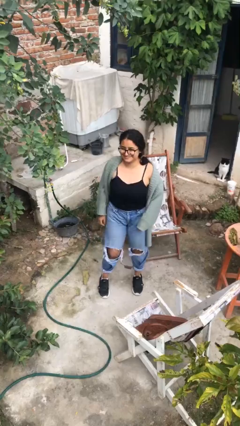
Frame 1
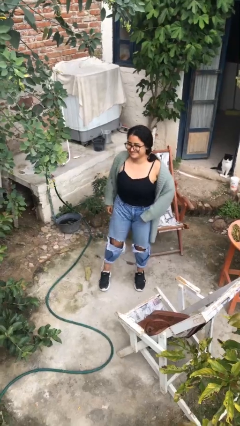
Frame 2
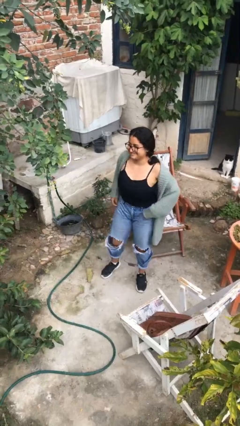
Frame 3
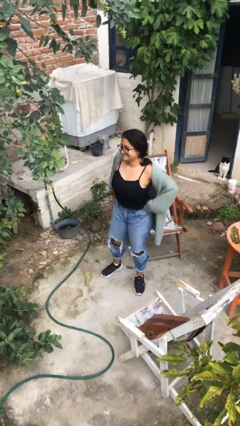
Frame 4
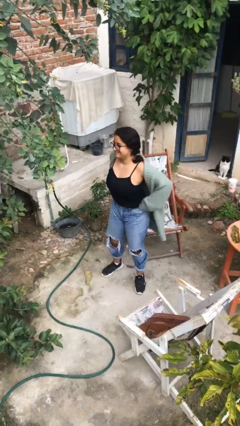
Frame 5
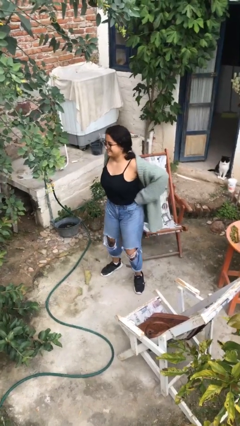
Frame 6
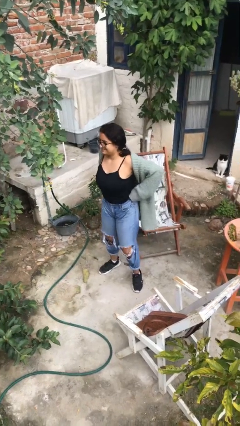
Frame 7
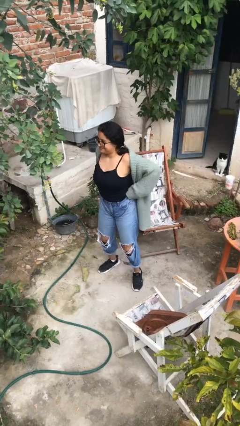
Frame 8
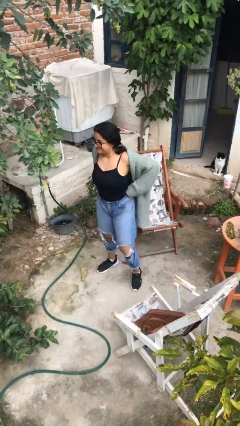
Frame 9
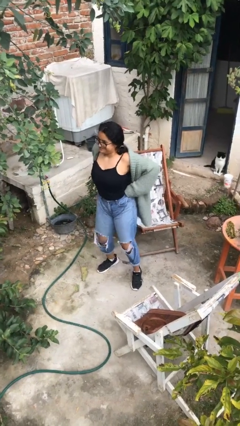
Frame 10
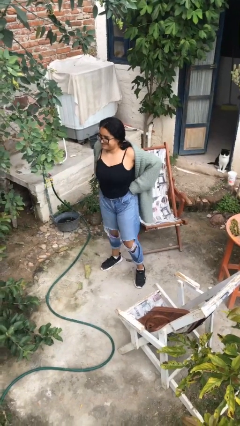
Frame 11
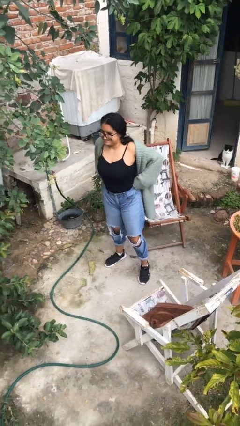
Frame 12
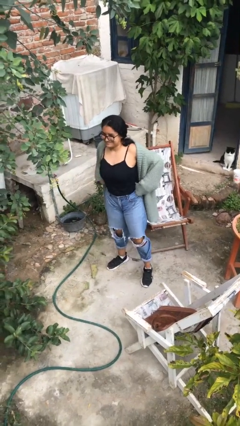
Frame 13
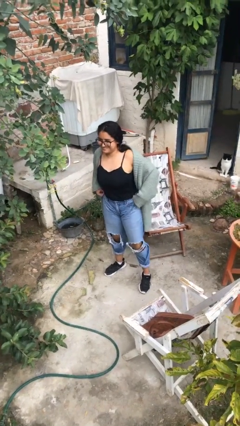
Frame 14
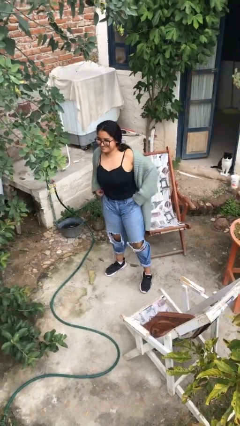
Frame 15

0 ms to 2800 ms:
person hikes up pants

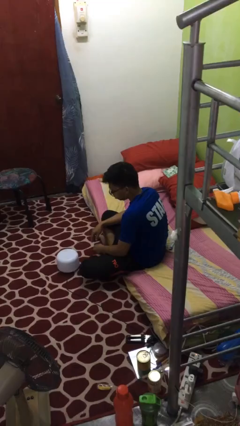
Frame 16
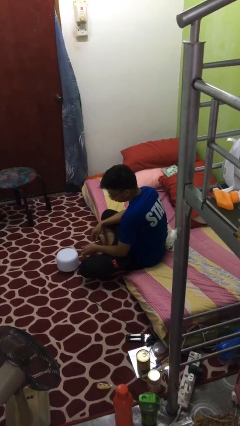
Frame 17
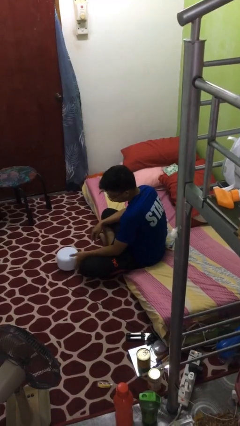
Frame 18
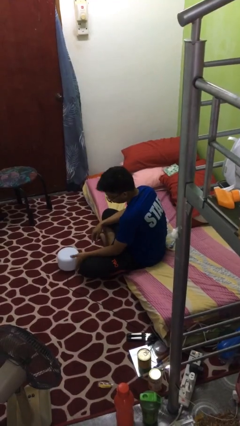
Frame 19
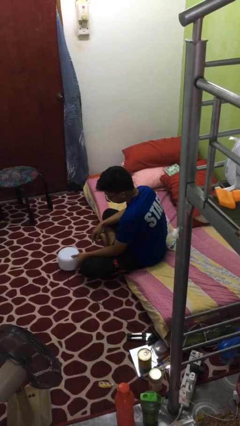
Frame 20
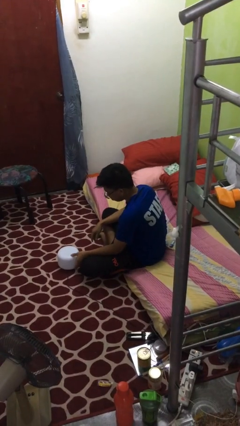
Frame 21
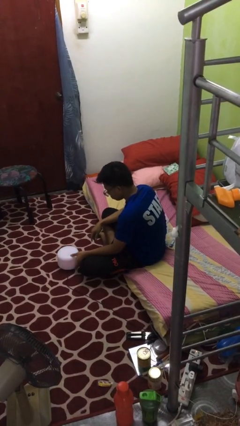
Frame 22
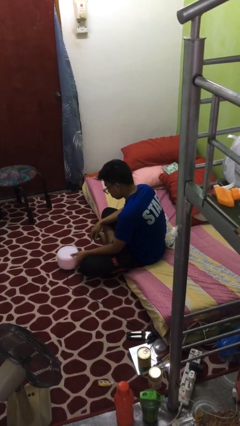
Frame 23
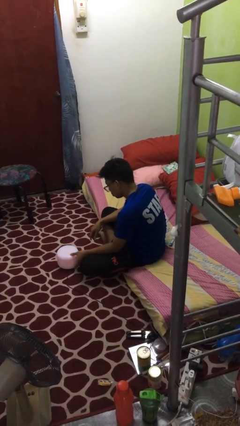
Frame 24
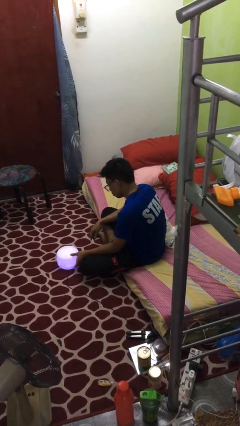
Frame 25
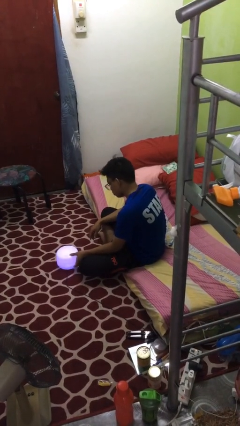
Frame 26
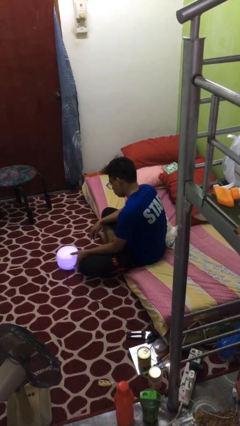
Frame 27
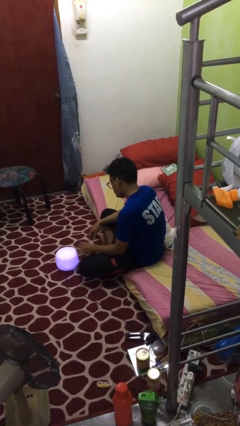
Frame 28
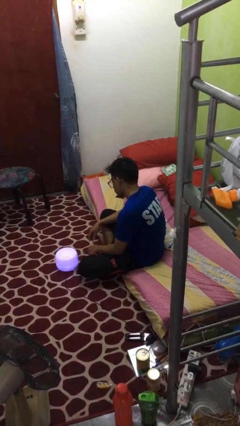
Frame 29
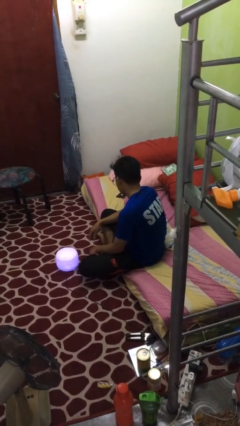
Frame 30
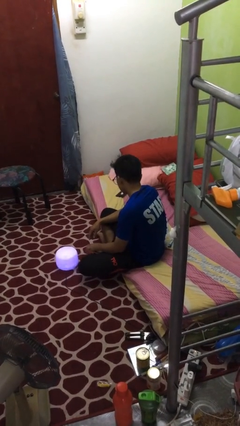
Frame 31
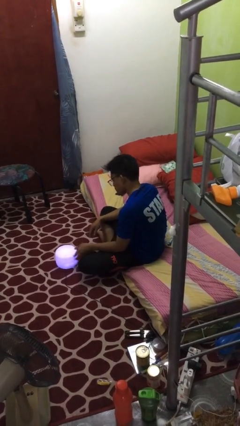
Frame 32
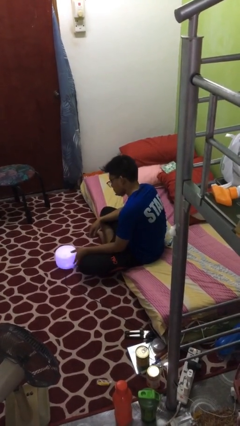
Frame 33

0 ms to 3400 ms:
person turns on lamp

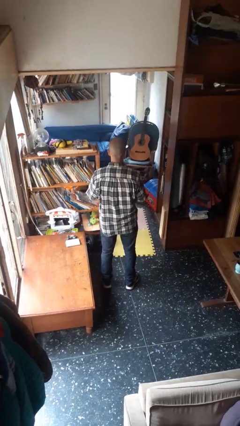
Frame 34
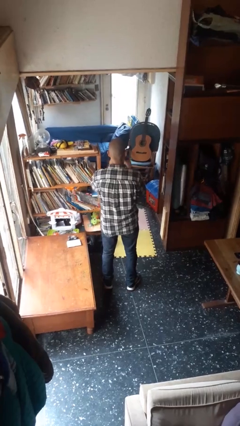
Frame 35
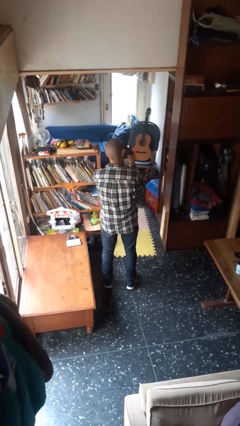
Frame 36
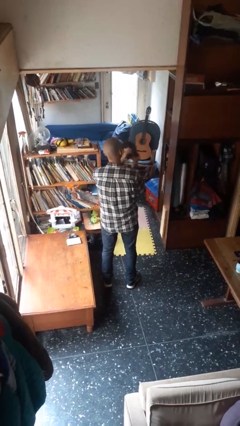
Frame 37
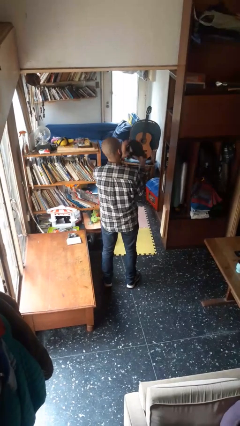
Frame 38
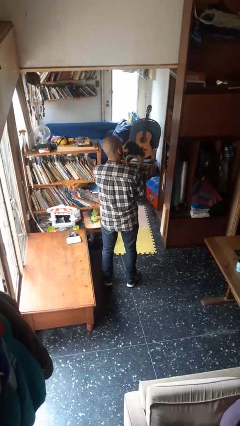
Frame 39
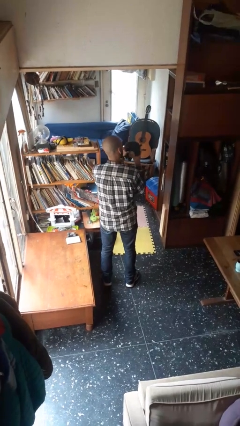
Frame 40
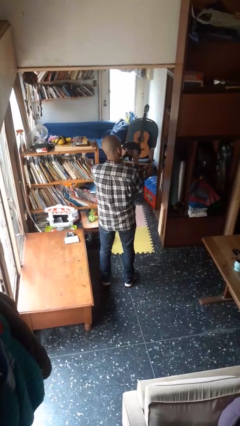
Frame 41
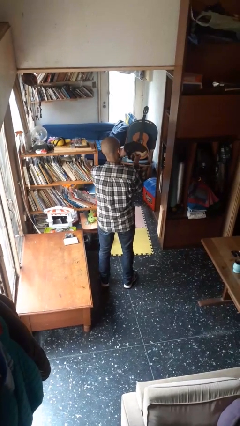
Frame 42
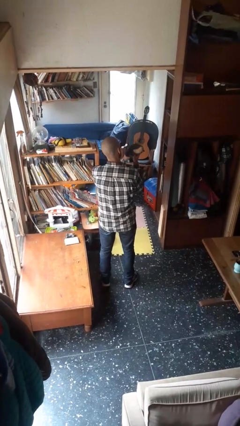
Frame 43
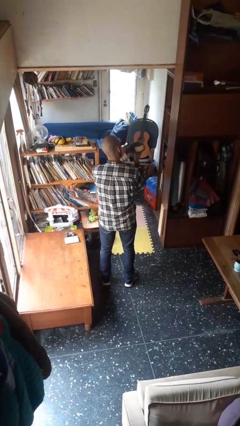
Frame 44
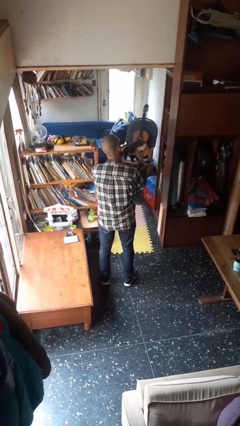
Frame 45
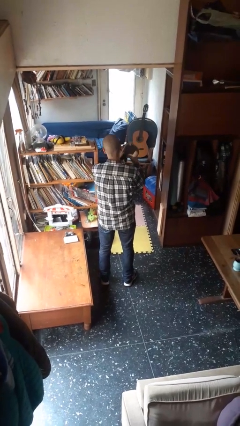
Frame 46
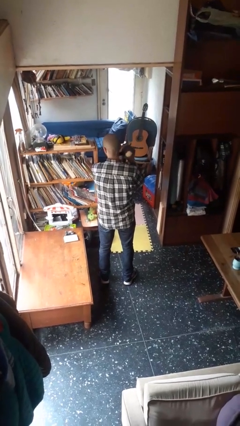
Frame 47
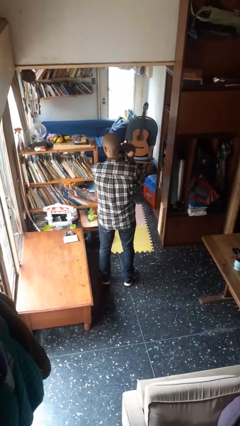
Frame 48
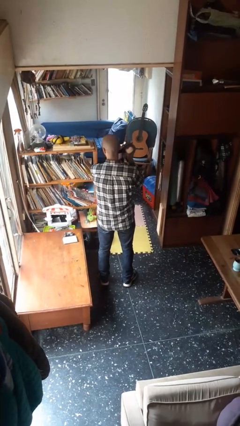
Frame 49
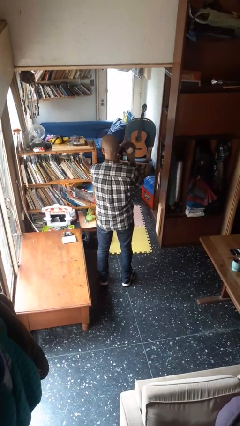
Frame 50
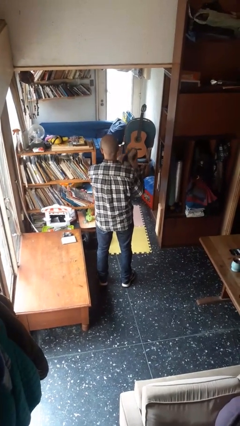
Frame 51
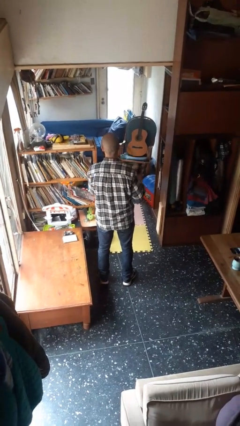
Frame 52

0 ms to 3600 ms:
person squeezes object

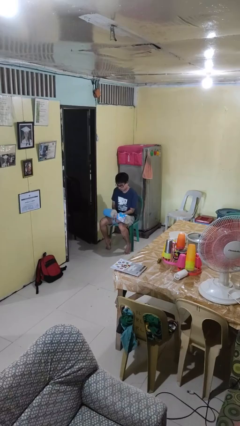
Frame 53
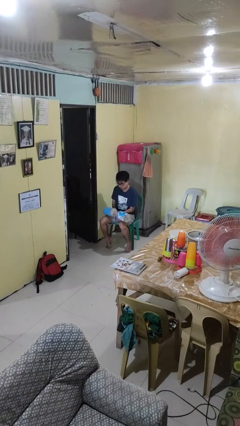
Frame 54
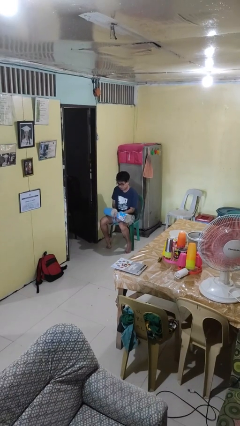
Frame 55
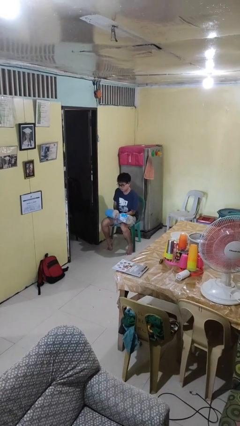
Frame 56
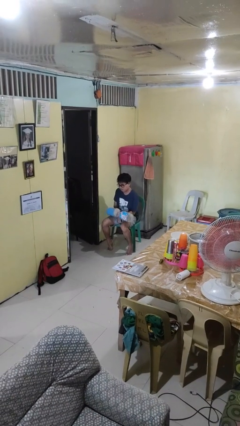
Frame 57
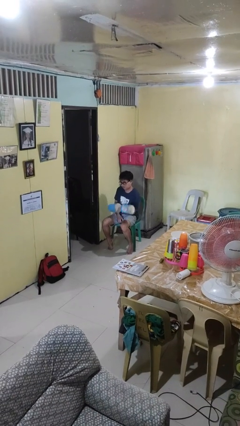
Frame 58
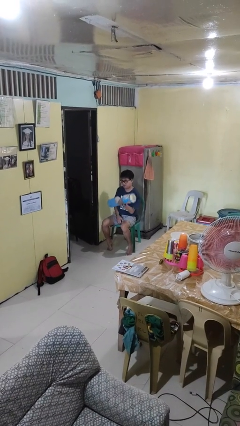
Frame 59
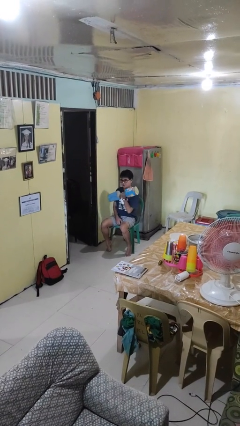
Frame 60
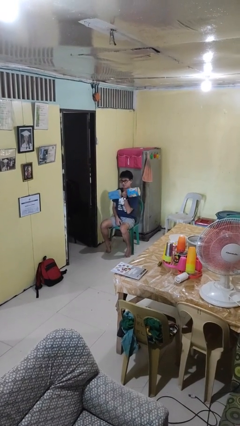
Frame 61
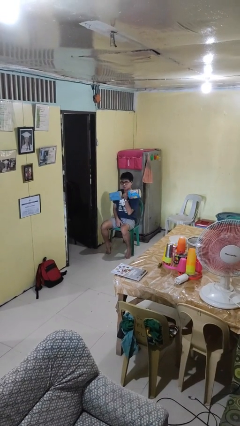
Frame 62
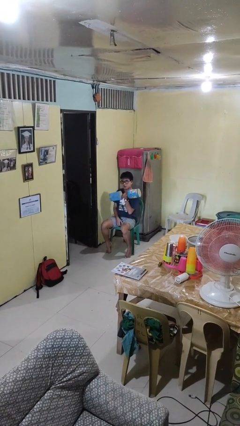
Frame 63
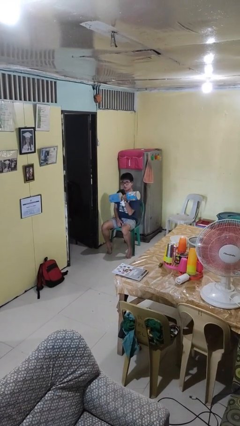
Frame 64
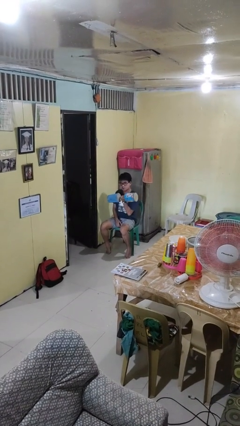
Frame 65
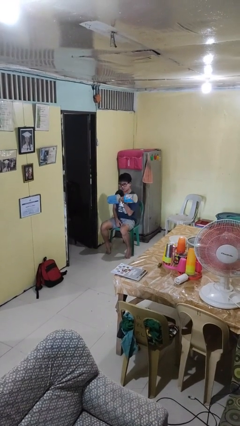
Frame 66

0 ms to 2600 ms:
person lifts dumbbells

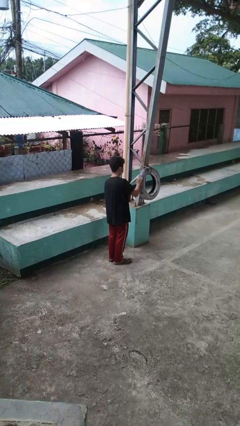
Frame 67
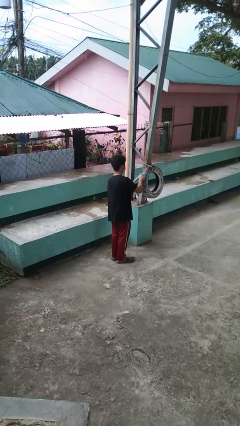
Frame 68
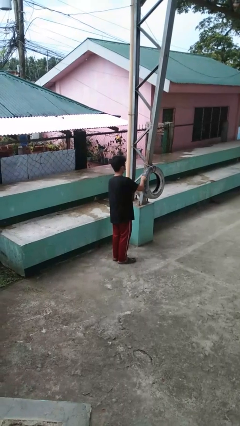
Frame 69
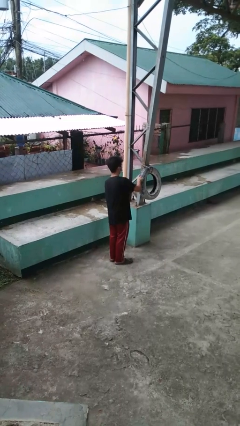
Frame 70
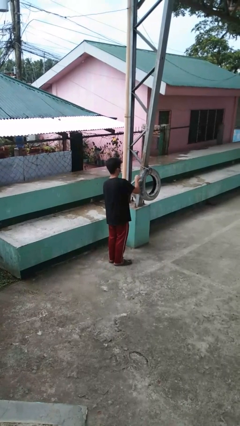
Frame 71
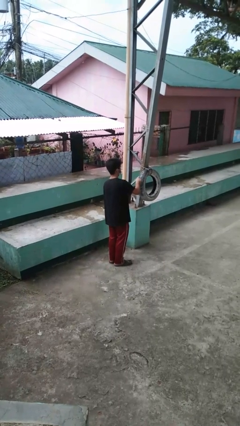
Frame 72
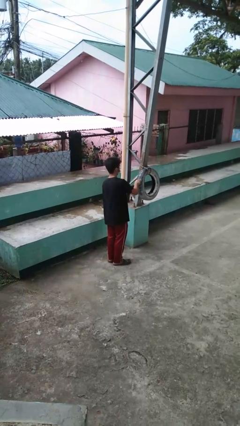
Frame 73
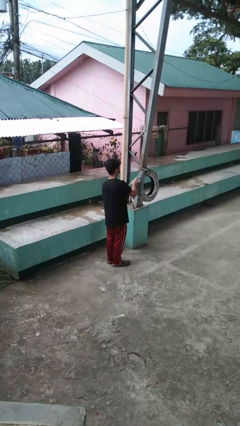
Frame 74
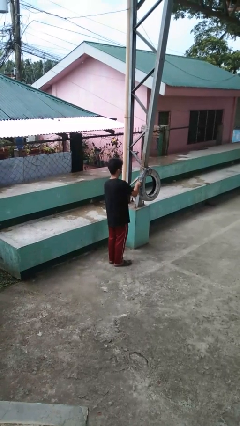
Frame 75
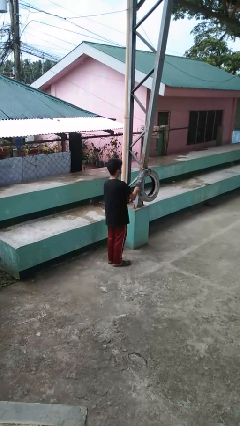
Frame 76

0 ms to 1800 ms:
person taps object with finger

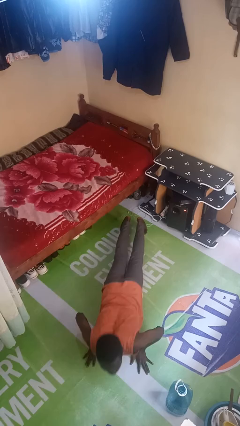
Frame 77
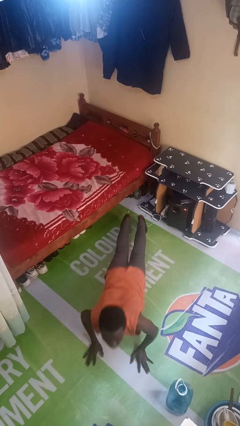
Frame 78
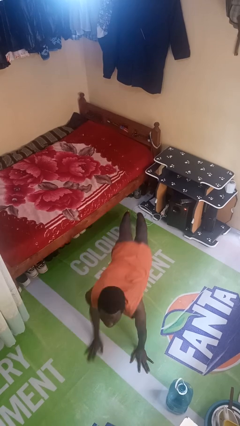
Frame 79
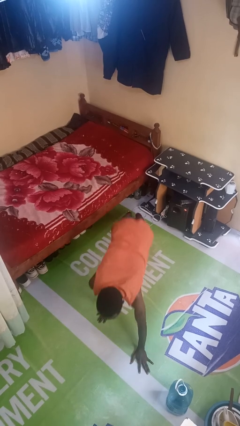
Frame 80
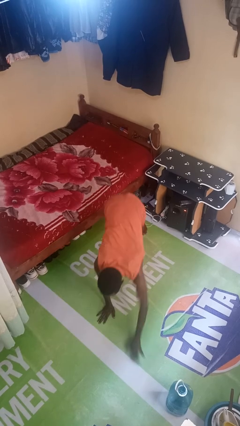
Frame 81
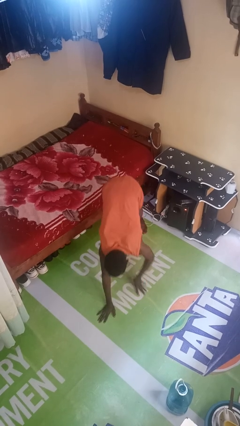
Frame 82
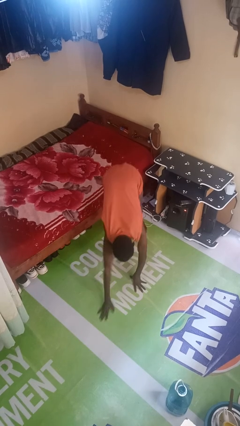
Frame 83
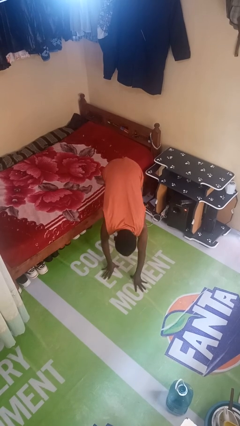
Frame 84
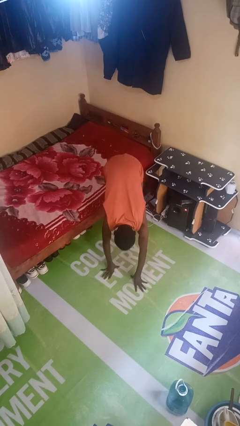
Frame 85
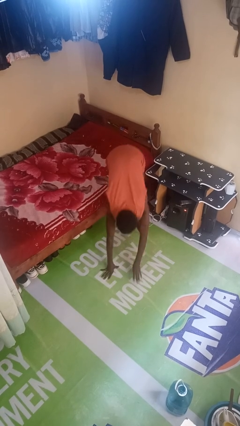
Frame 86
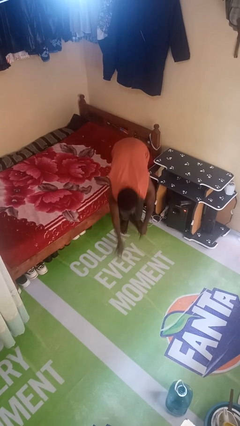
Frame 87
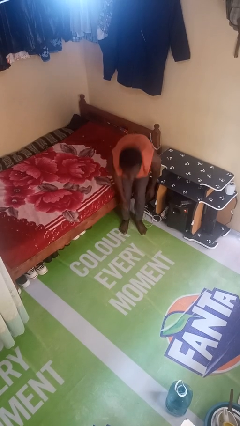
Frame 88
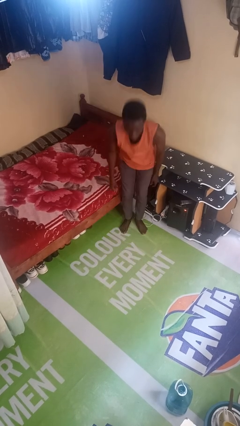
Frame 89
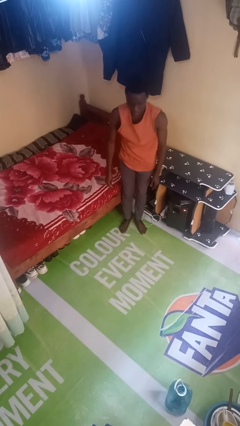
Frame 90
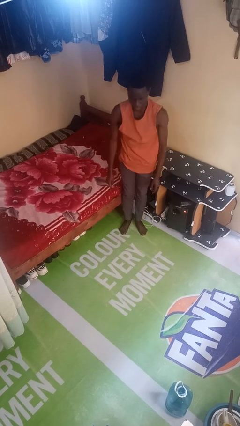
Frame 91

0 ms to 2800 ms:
person stands up from floor

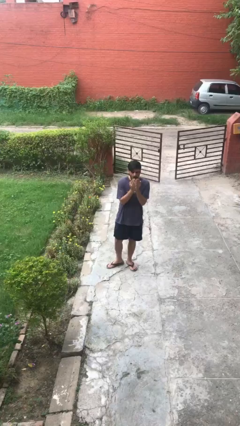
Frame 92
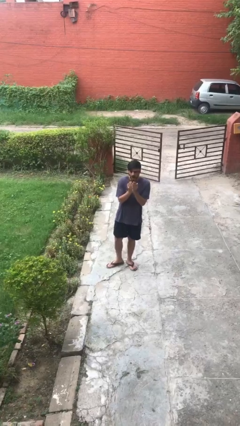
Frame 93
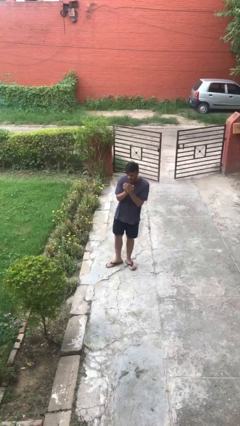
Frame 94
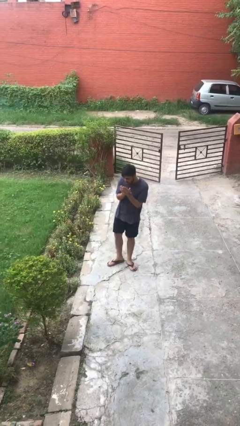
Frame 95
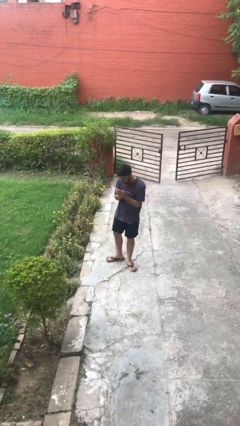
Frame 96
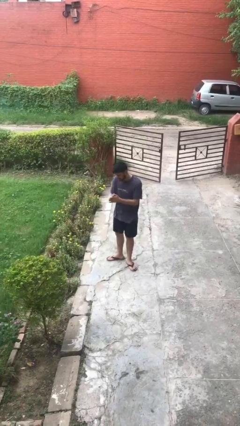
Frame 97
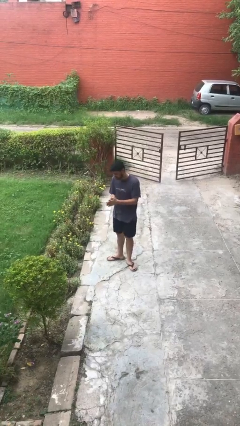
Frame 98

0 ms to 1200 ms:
person blows into hands
